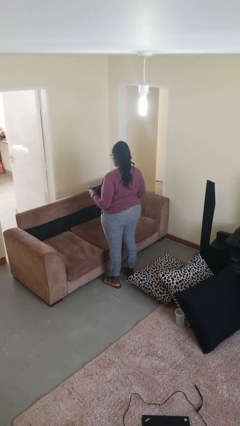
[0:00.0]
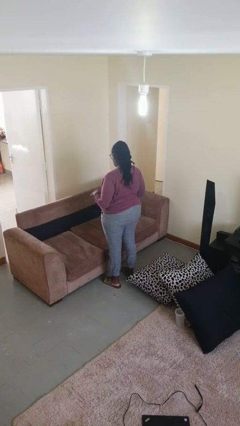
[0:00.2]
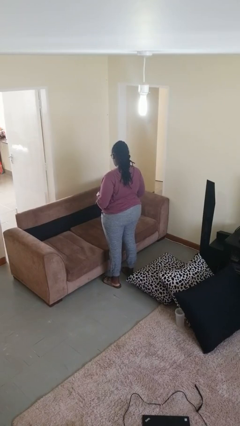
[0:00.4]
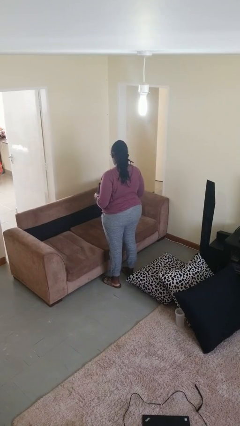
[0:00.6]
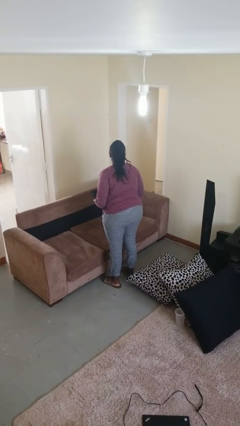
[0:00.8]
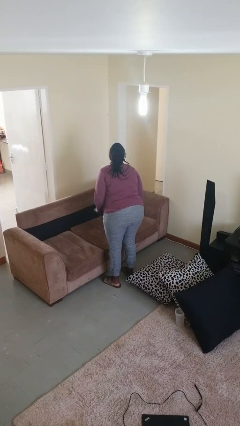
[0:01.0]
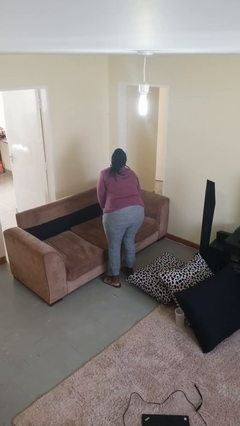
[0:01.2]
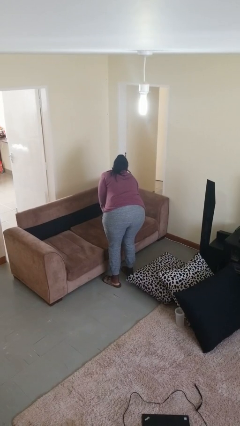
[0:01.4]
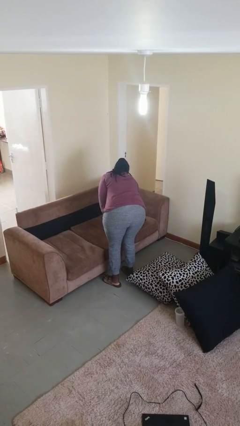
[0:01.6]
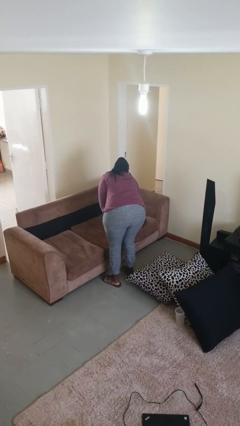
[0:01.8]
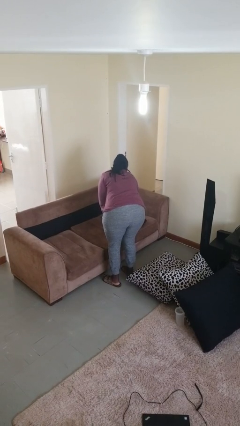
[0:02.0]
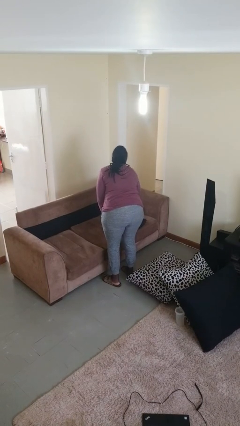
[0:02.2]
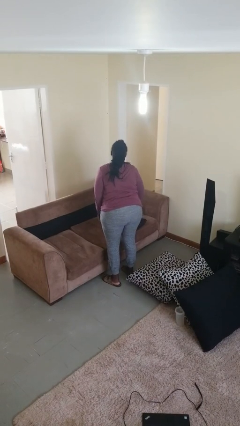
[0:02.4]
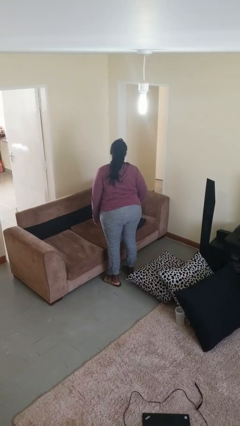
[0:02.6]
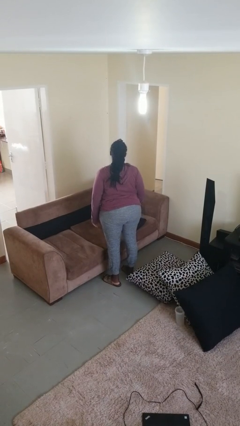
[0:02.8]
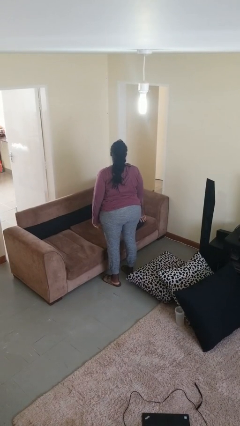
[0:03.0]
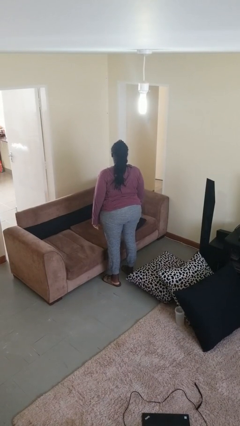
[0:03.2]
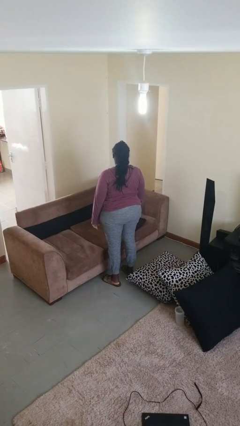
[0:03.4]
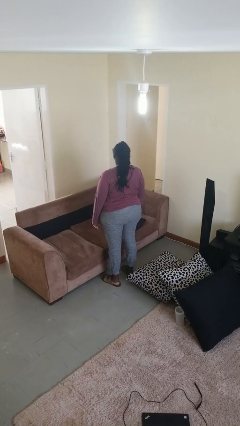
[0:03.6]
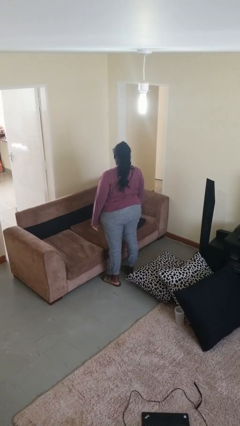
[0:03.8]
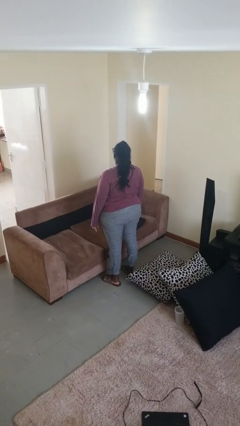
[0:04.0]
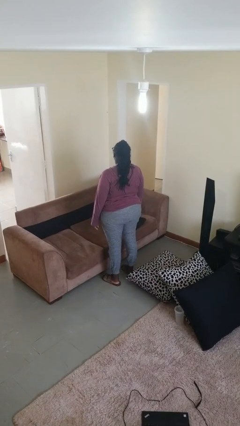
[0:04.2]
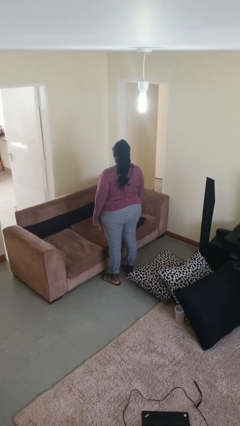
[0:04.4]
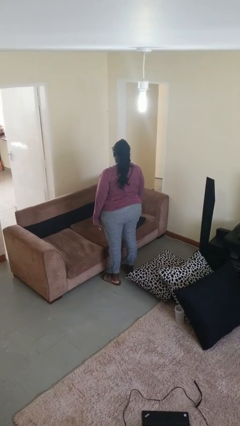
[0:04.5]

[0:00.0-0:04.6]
person puts down object on couch

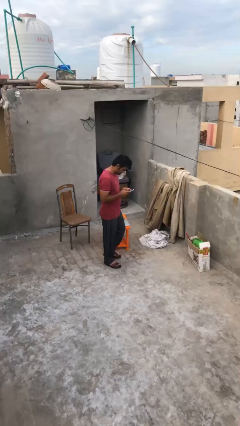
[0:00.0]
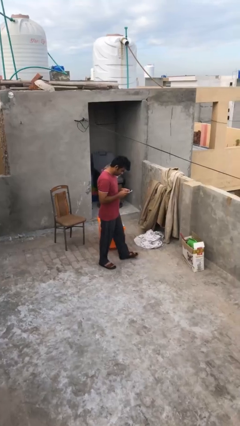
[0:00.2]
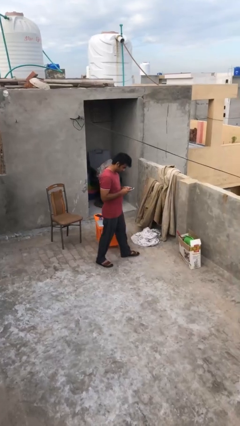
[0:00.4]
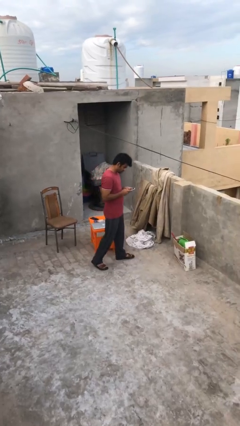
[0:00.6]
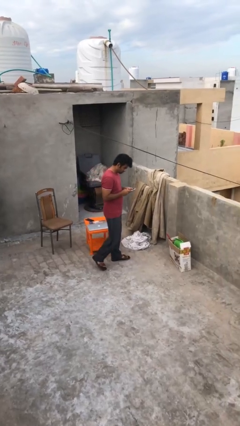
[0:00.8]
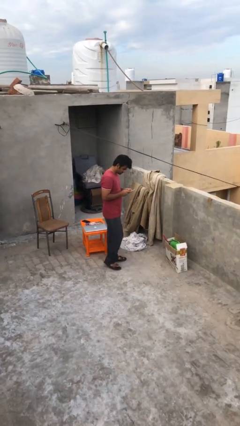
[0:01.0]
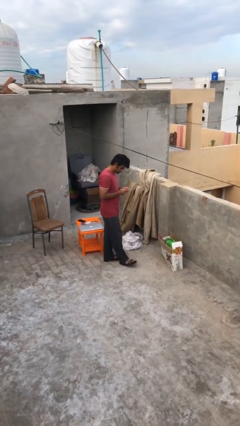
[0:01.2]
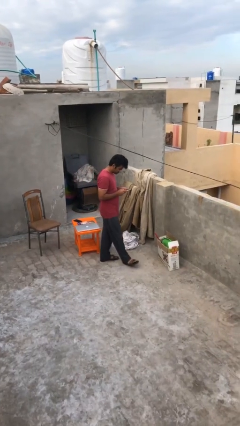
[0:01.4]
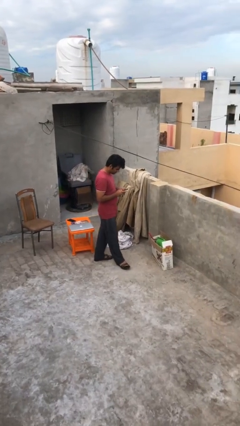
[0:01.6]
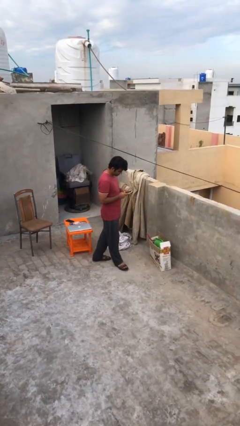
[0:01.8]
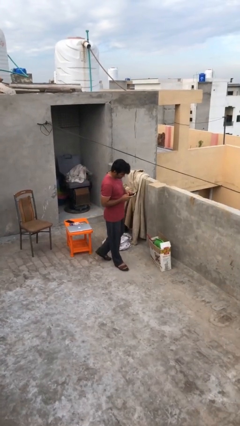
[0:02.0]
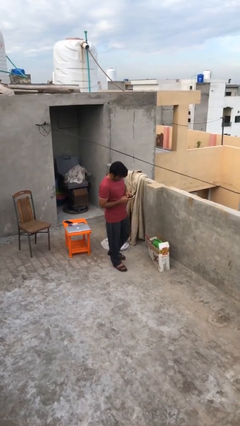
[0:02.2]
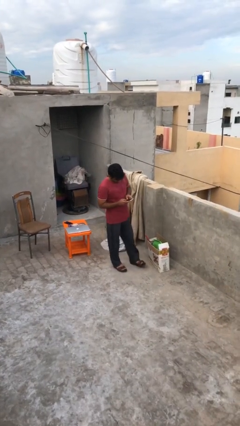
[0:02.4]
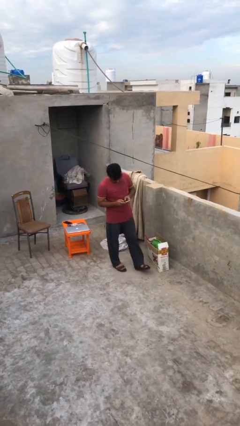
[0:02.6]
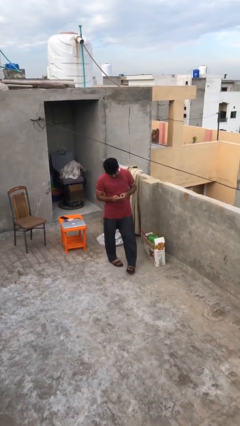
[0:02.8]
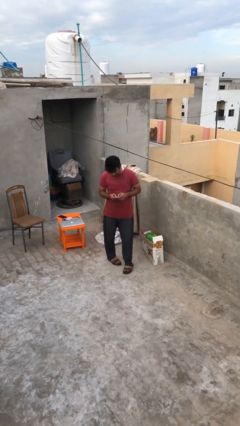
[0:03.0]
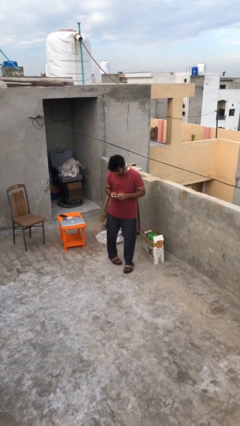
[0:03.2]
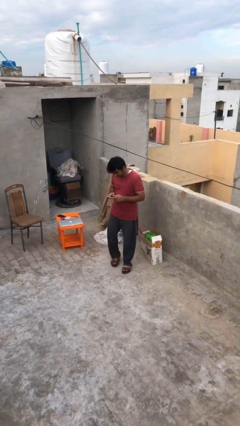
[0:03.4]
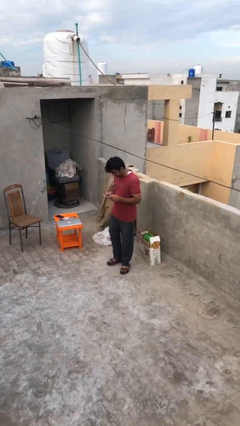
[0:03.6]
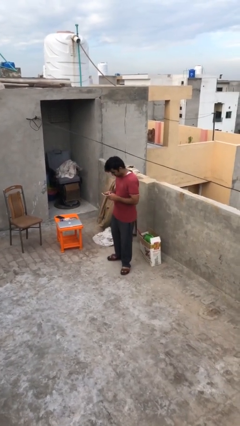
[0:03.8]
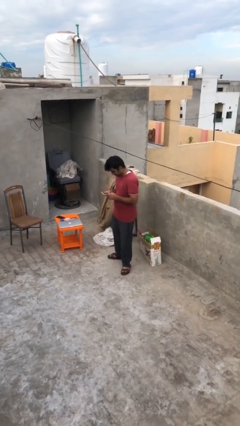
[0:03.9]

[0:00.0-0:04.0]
person texts on phone

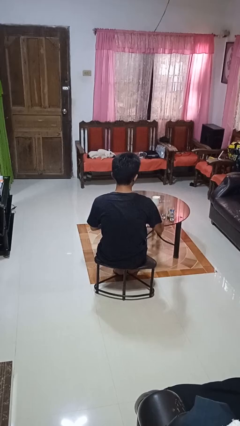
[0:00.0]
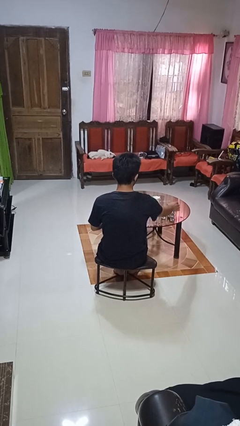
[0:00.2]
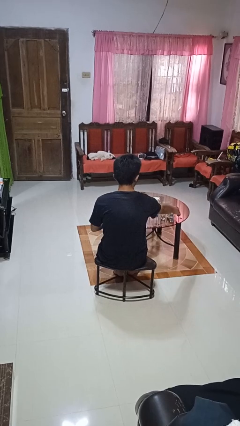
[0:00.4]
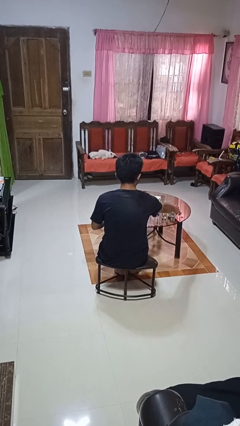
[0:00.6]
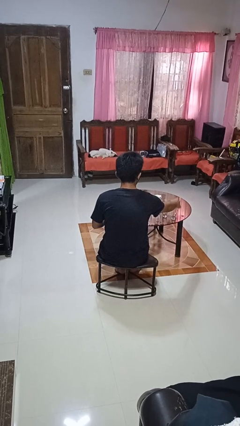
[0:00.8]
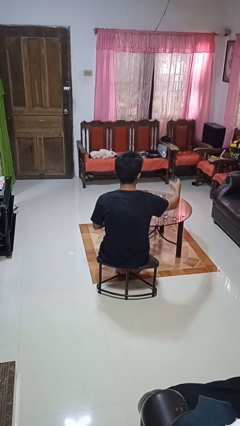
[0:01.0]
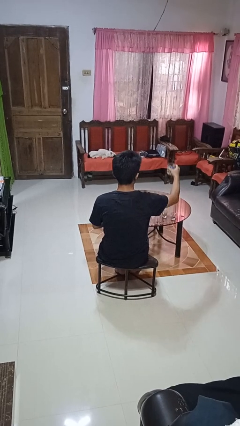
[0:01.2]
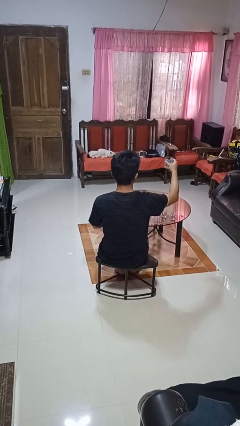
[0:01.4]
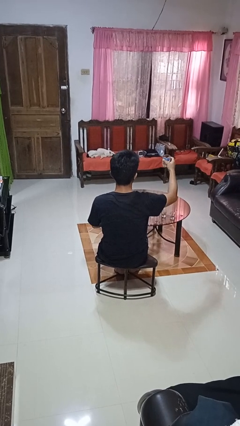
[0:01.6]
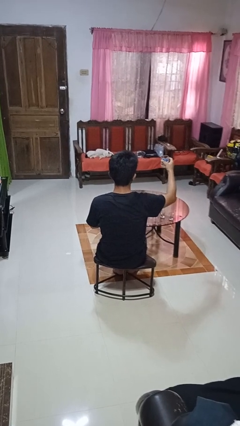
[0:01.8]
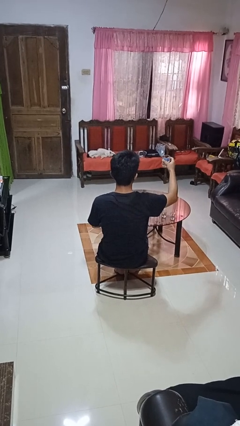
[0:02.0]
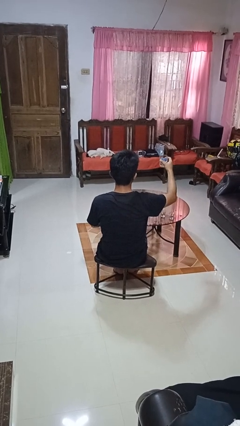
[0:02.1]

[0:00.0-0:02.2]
person picks up object from table

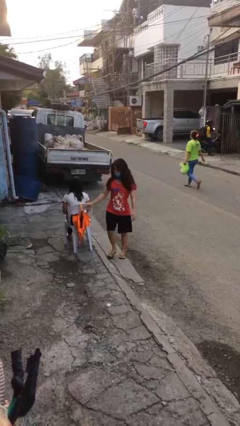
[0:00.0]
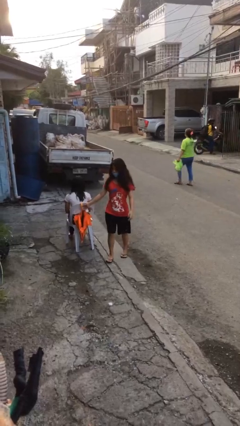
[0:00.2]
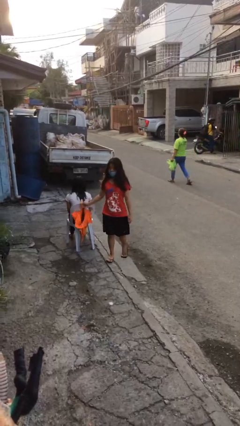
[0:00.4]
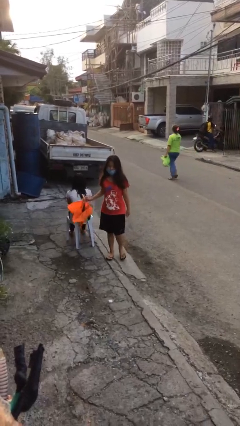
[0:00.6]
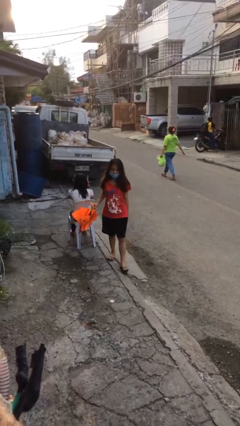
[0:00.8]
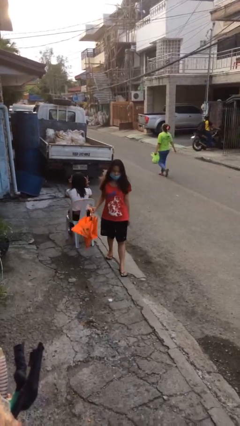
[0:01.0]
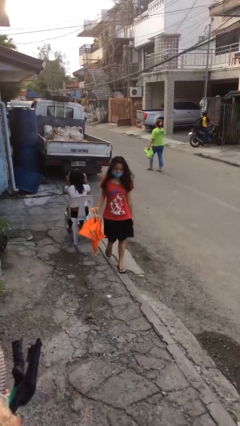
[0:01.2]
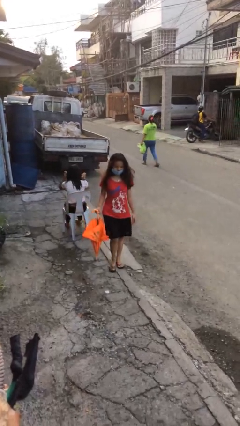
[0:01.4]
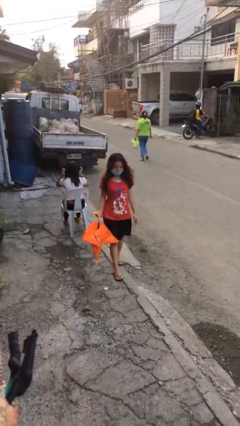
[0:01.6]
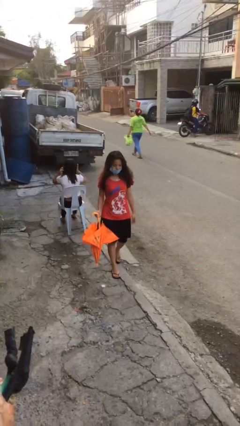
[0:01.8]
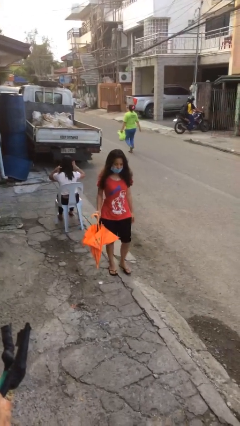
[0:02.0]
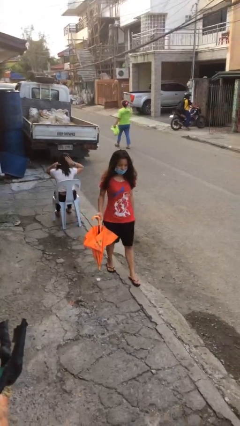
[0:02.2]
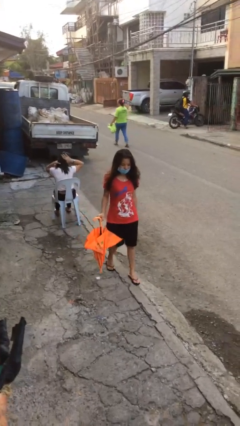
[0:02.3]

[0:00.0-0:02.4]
person steals object from person

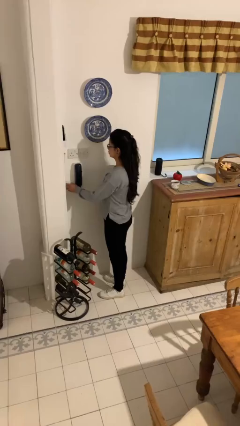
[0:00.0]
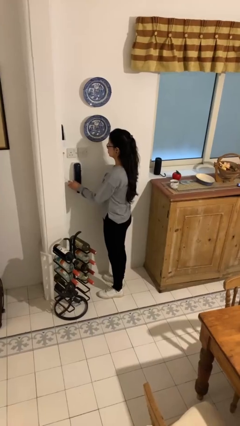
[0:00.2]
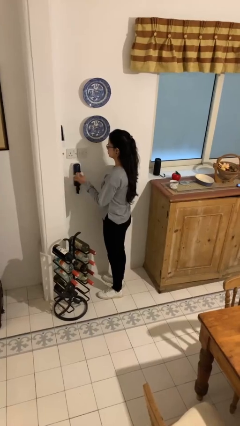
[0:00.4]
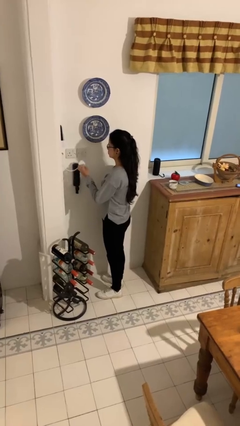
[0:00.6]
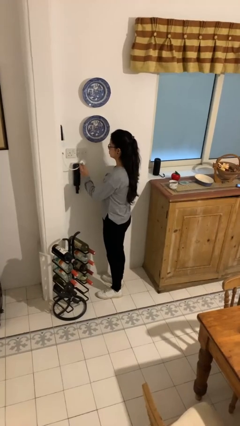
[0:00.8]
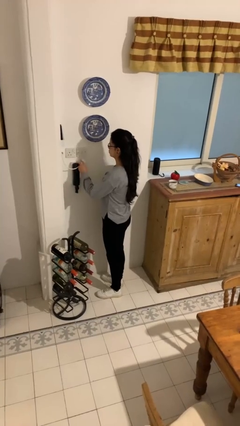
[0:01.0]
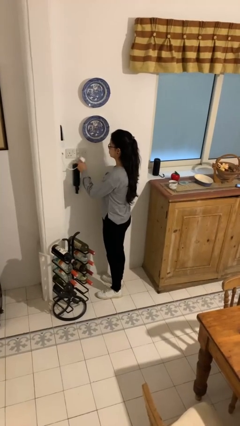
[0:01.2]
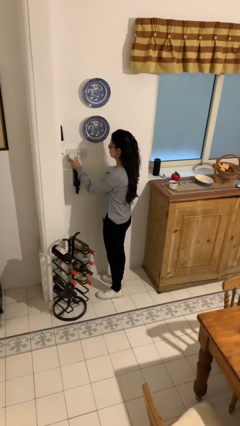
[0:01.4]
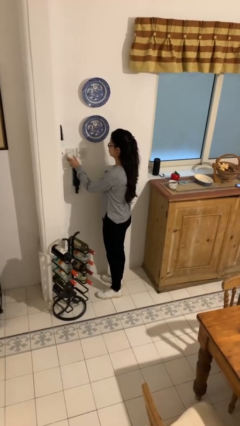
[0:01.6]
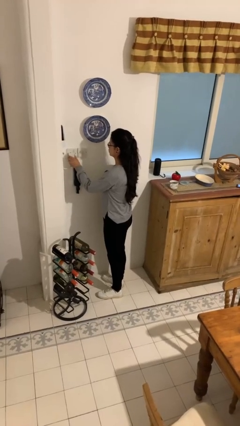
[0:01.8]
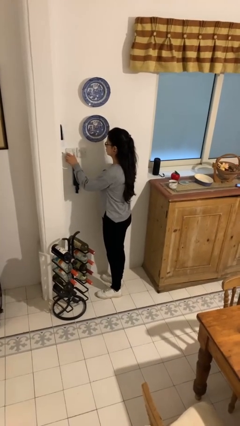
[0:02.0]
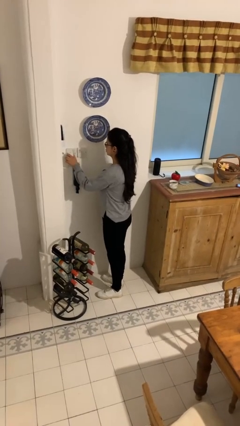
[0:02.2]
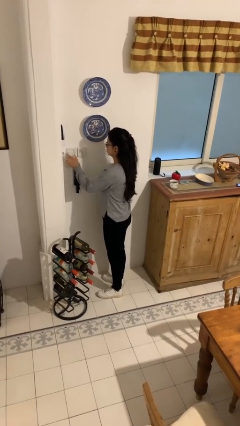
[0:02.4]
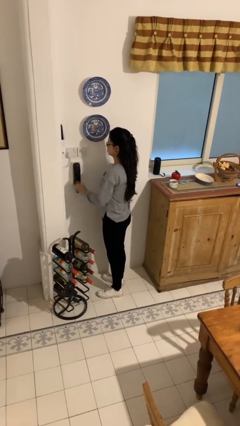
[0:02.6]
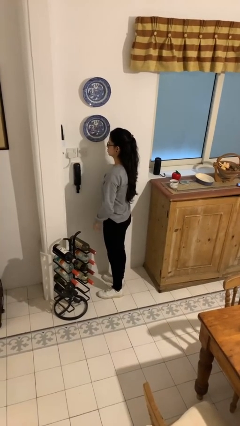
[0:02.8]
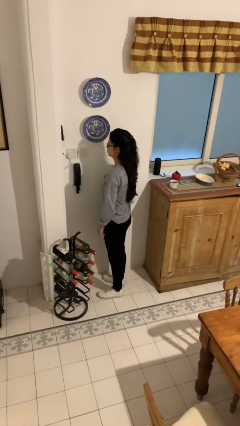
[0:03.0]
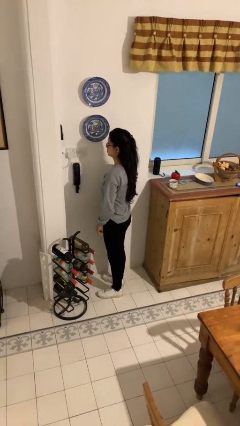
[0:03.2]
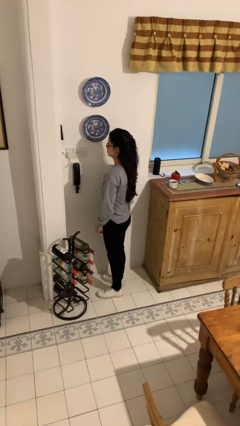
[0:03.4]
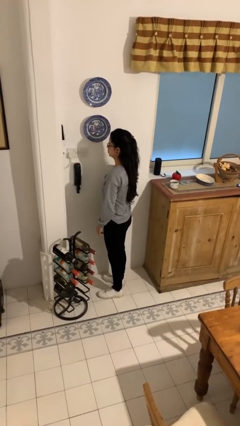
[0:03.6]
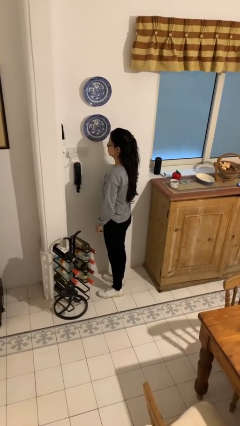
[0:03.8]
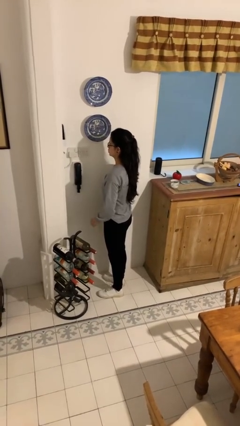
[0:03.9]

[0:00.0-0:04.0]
person plugs into electrical socket

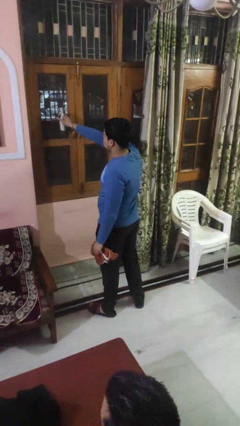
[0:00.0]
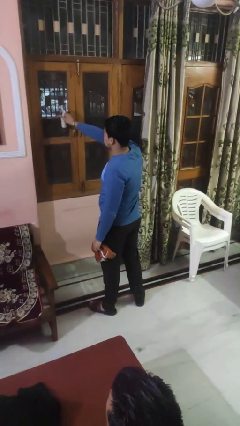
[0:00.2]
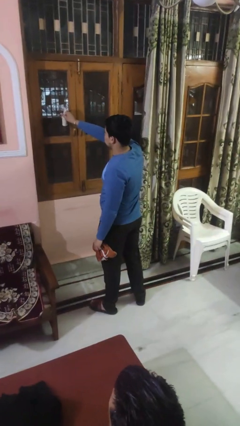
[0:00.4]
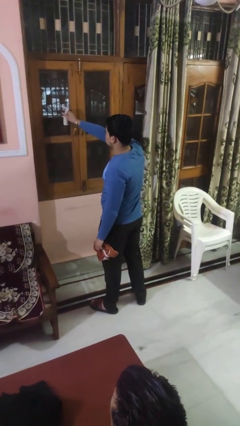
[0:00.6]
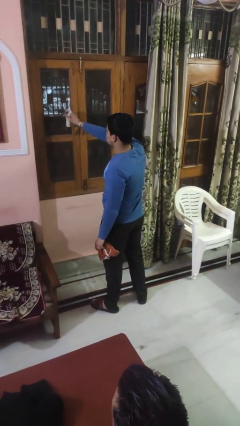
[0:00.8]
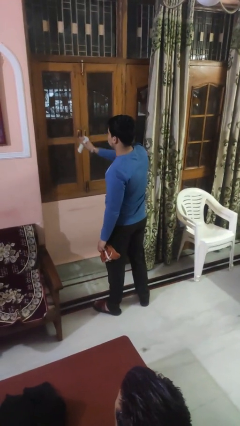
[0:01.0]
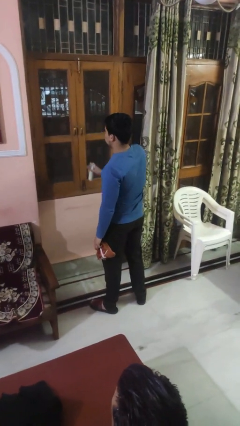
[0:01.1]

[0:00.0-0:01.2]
person sprays from bottle
